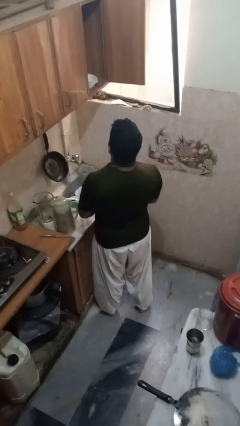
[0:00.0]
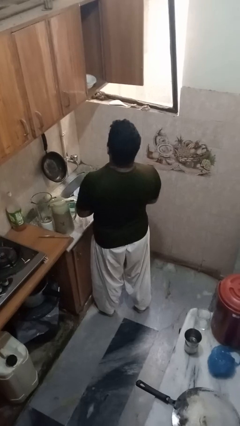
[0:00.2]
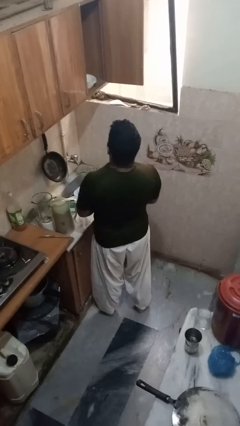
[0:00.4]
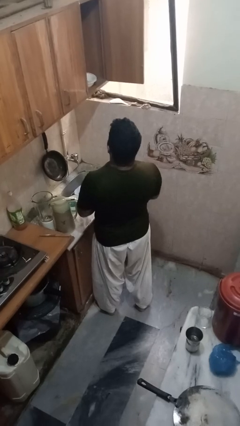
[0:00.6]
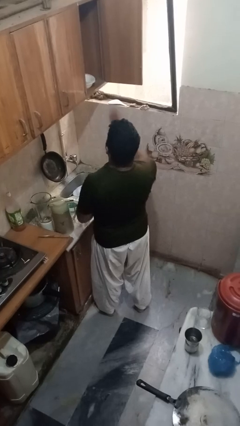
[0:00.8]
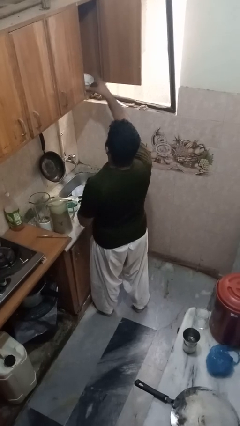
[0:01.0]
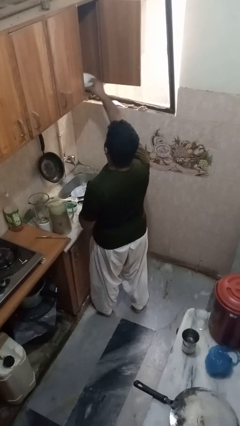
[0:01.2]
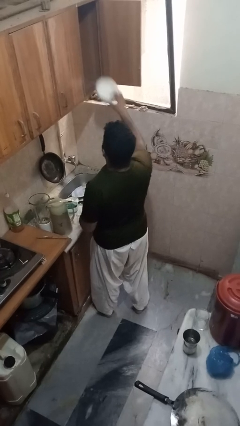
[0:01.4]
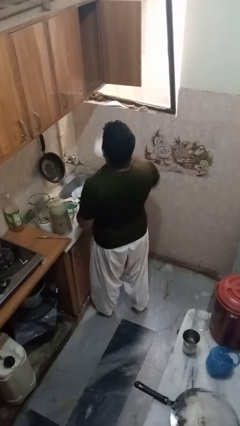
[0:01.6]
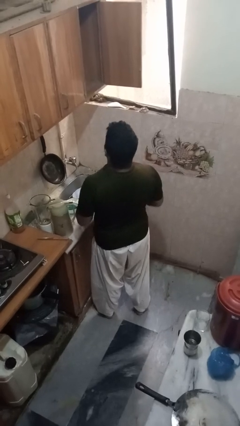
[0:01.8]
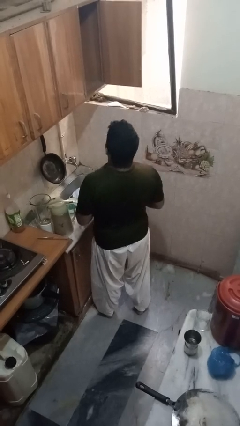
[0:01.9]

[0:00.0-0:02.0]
person takes object from cabinet

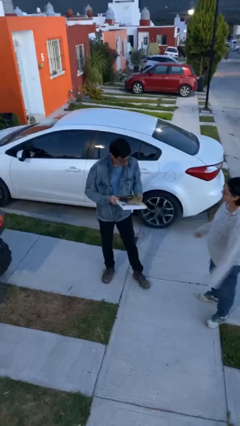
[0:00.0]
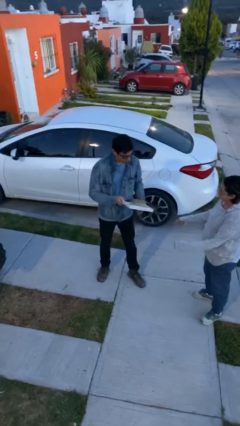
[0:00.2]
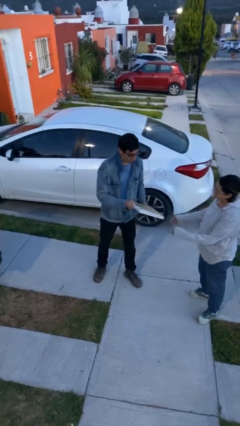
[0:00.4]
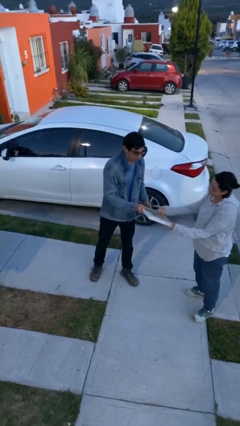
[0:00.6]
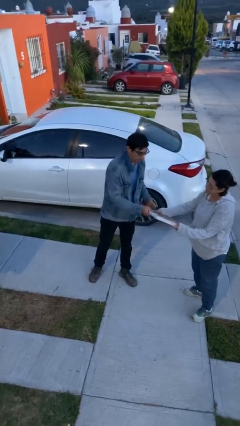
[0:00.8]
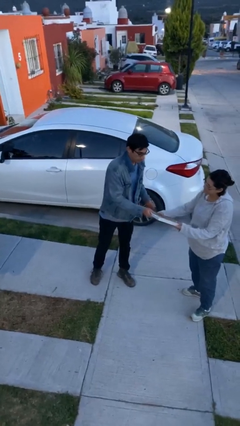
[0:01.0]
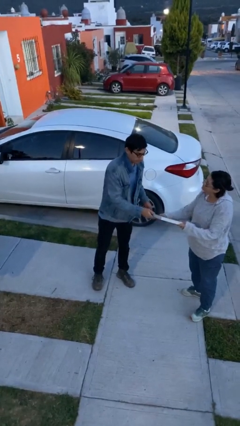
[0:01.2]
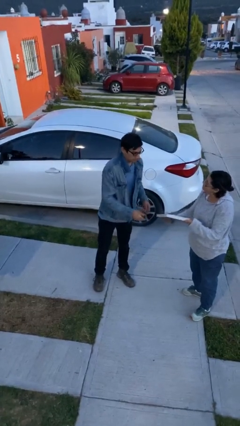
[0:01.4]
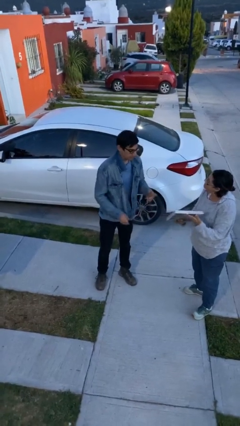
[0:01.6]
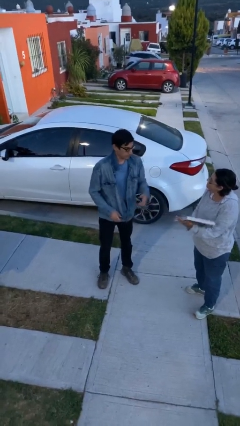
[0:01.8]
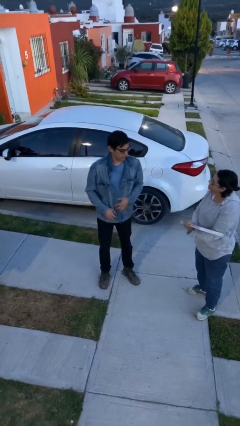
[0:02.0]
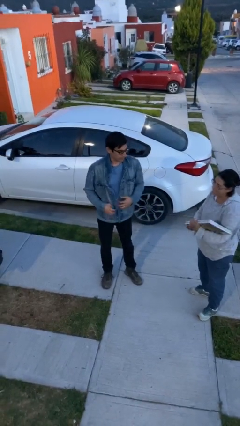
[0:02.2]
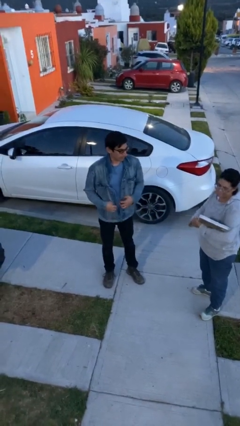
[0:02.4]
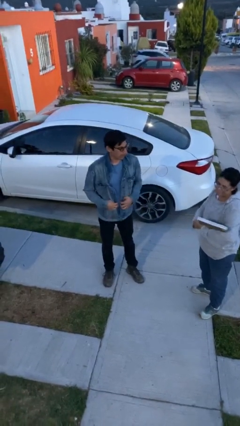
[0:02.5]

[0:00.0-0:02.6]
person transfers object to person

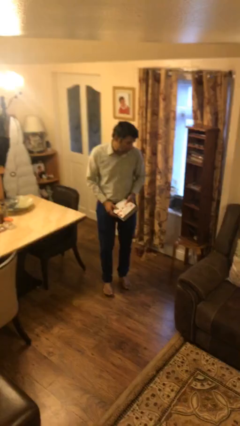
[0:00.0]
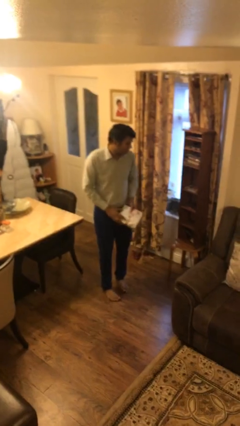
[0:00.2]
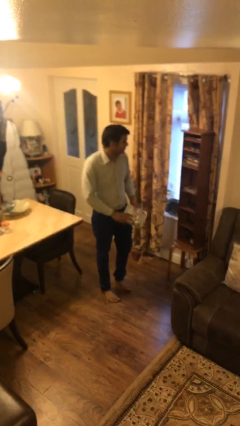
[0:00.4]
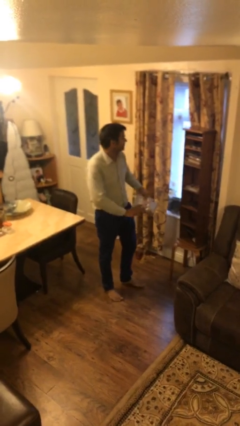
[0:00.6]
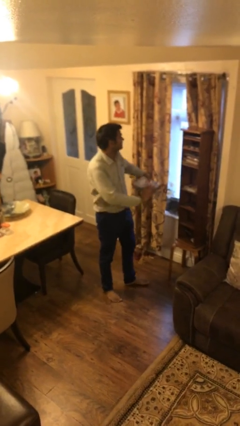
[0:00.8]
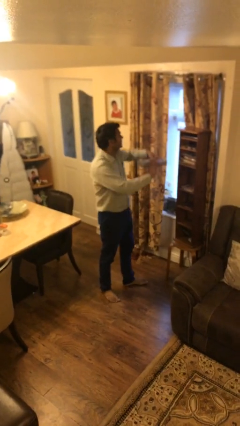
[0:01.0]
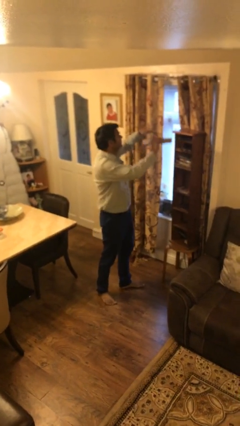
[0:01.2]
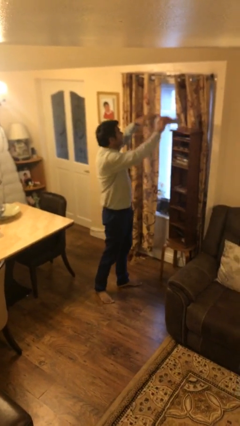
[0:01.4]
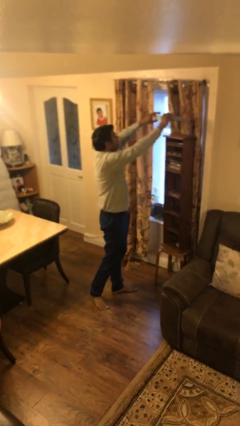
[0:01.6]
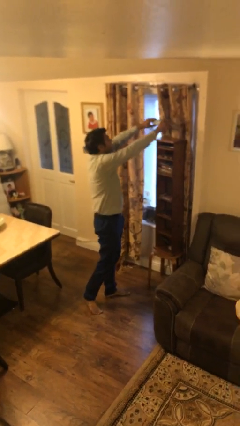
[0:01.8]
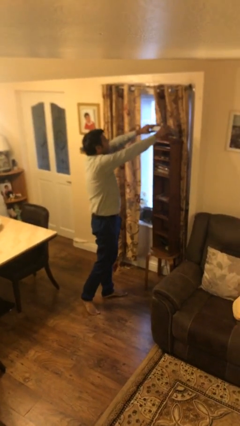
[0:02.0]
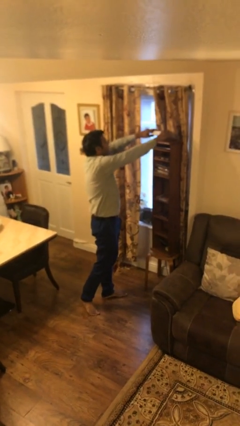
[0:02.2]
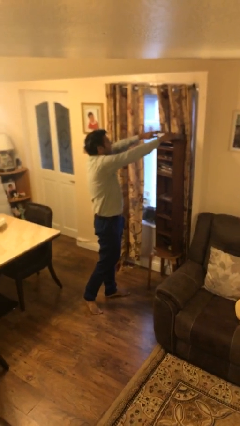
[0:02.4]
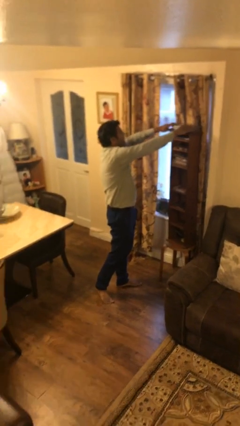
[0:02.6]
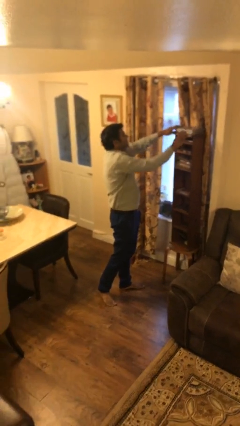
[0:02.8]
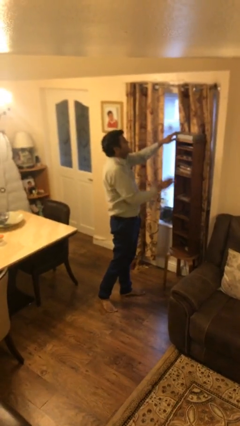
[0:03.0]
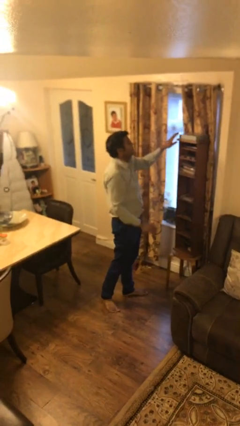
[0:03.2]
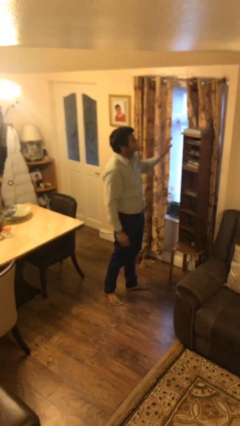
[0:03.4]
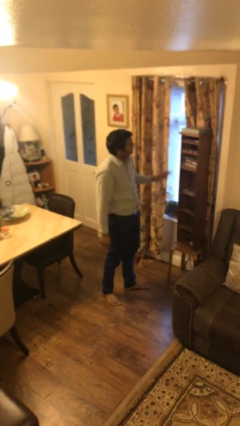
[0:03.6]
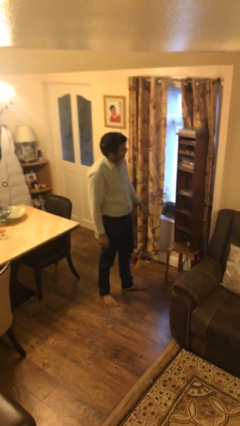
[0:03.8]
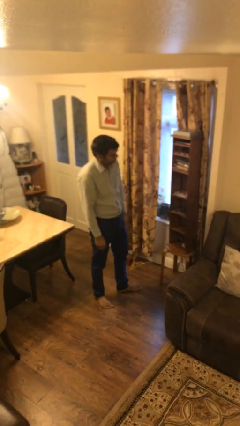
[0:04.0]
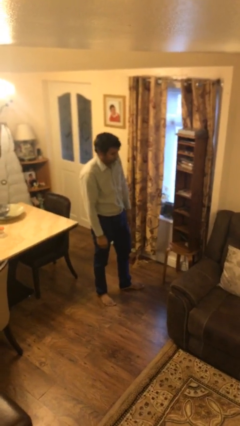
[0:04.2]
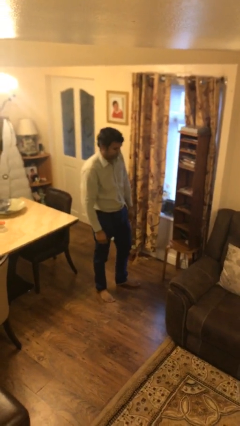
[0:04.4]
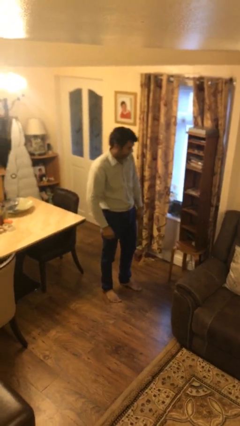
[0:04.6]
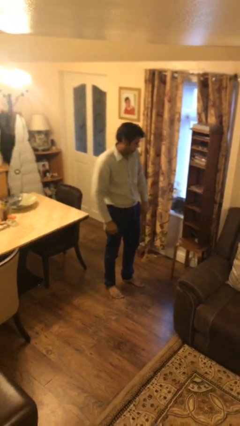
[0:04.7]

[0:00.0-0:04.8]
person puts down object on shelf

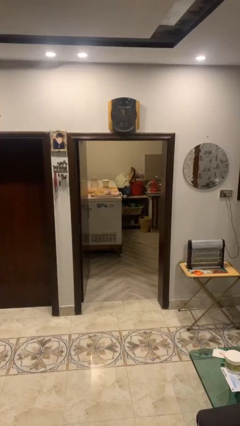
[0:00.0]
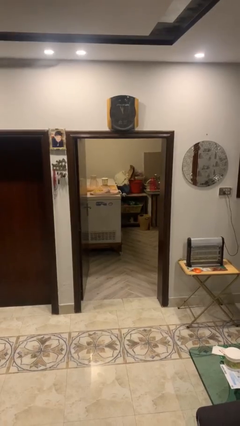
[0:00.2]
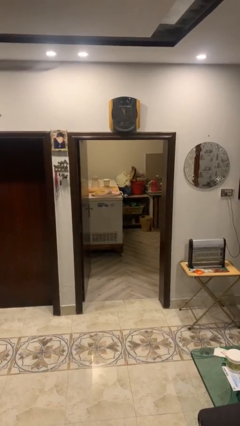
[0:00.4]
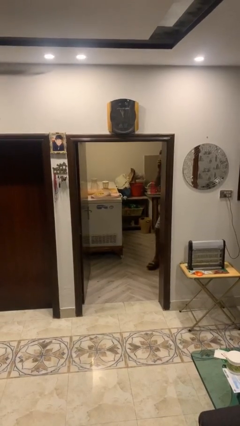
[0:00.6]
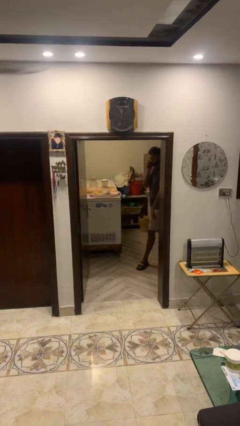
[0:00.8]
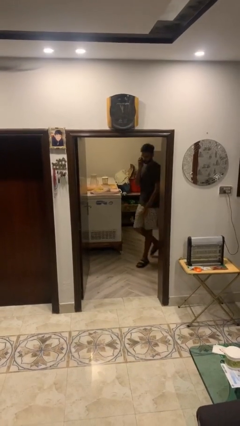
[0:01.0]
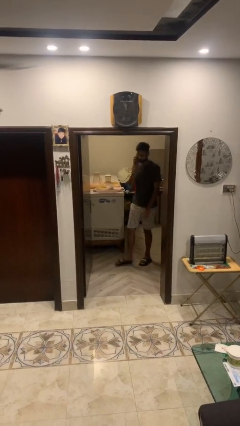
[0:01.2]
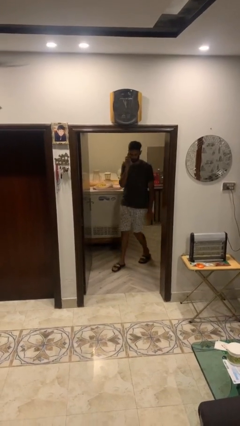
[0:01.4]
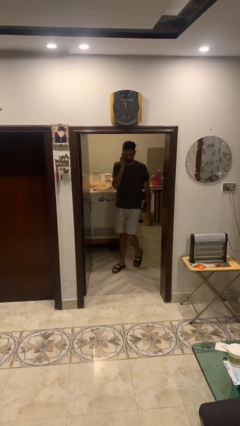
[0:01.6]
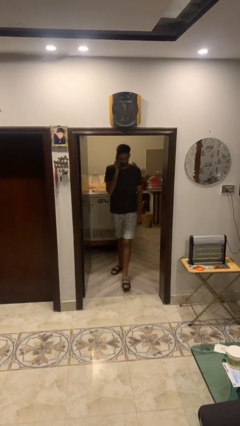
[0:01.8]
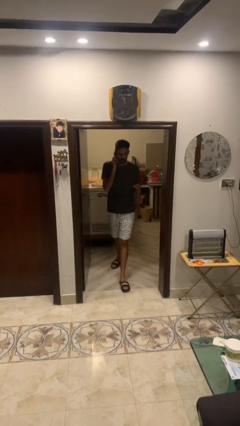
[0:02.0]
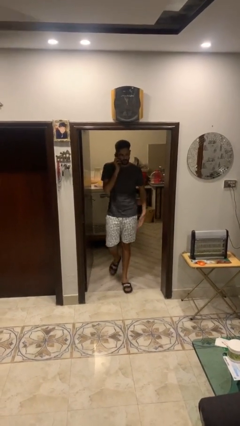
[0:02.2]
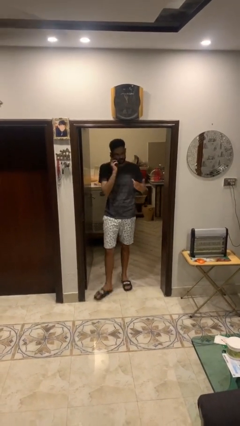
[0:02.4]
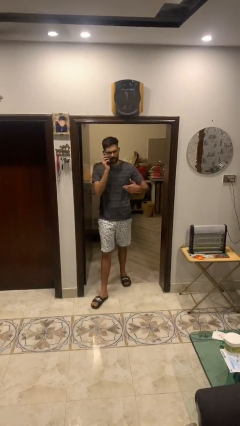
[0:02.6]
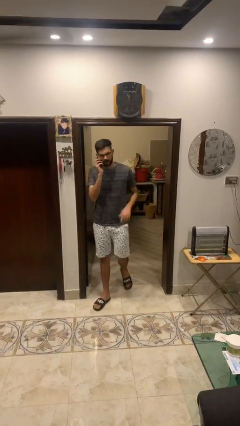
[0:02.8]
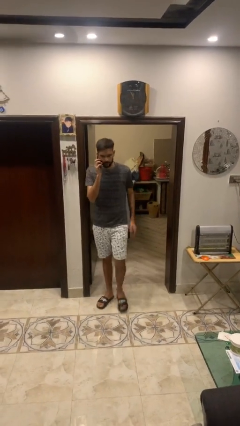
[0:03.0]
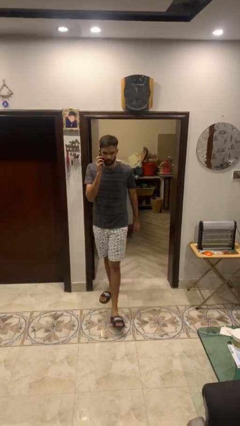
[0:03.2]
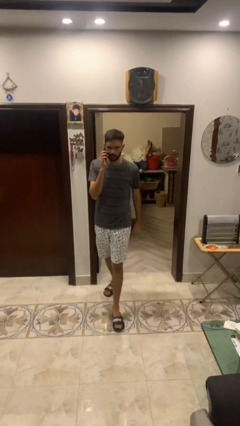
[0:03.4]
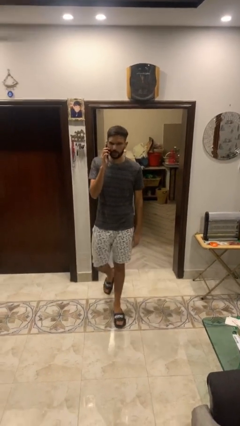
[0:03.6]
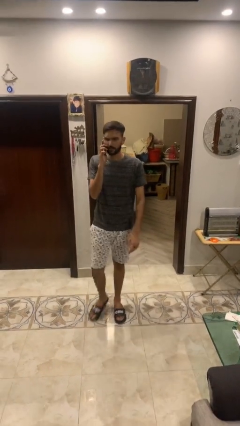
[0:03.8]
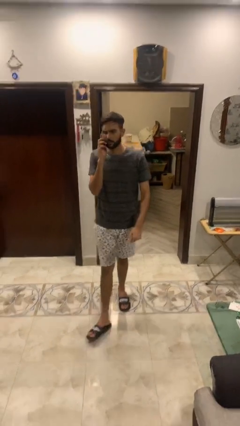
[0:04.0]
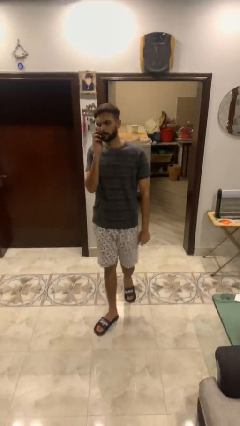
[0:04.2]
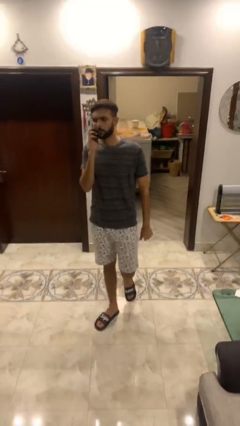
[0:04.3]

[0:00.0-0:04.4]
person enters scene through structure

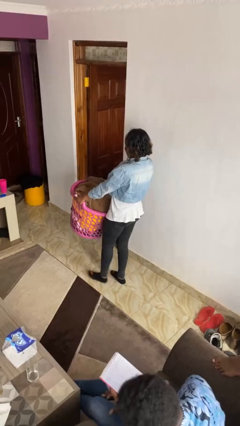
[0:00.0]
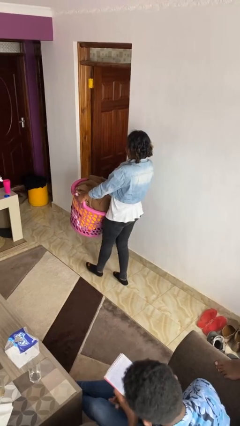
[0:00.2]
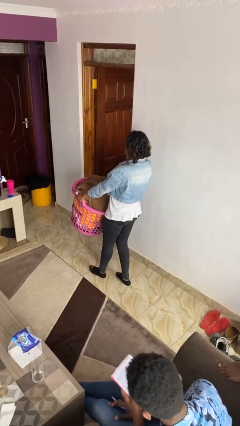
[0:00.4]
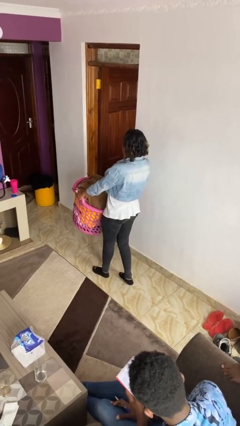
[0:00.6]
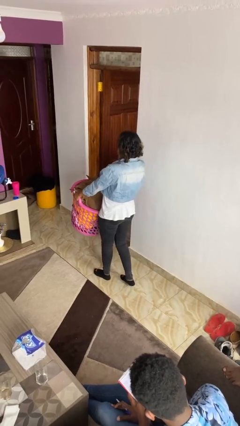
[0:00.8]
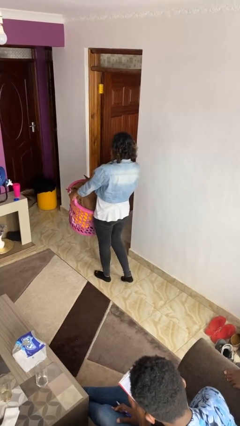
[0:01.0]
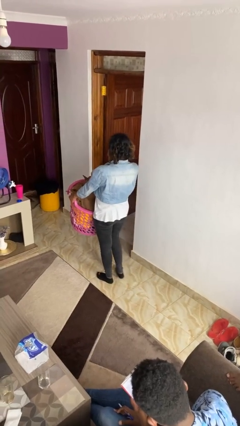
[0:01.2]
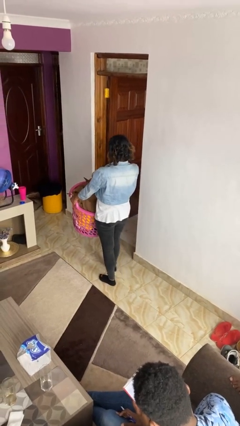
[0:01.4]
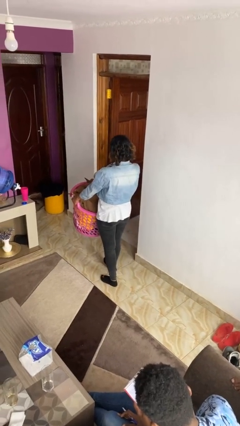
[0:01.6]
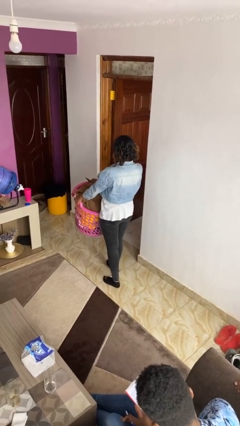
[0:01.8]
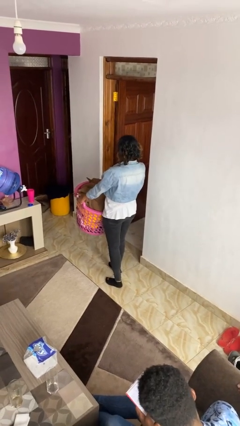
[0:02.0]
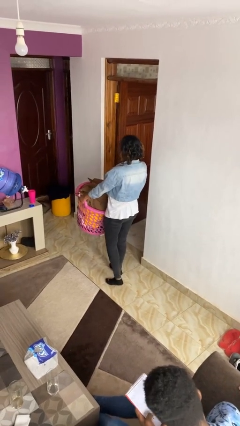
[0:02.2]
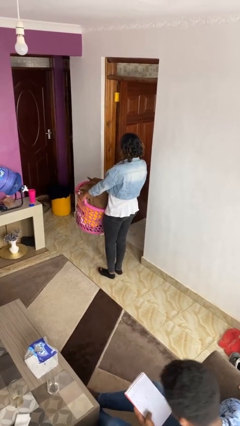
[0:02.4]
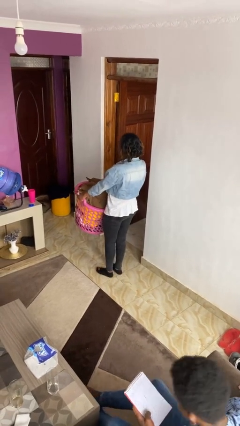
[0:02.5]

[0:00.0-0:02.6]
person carries laundry basket

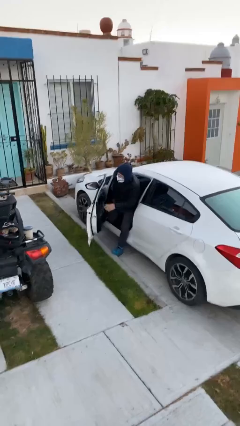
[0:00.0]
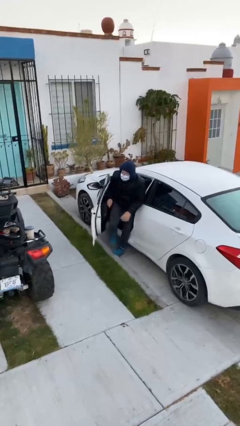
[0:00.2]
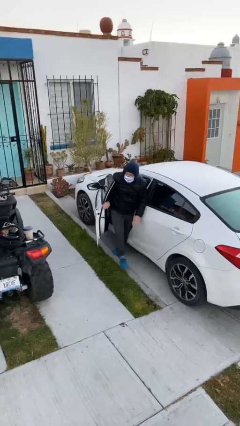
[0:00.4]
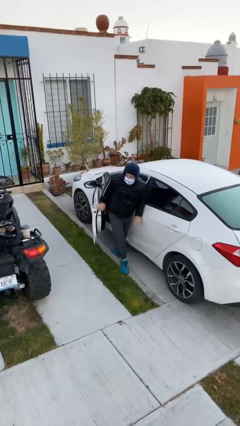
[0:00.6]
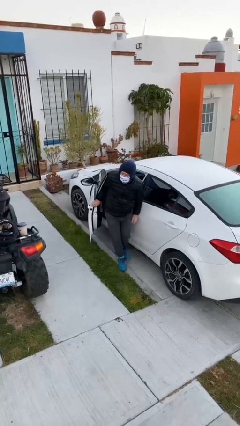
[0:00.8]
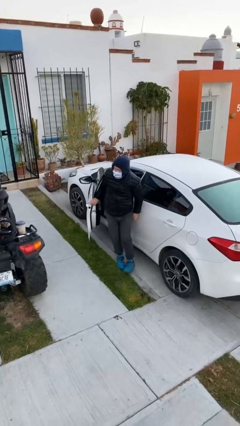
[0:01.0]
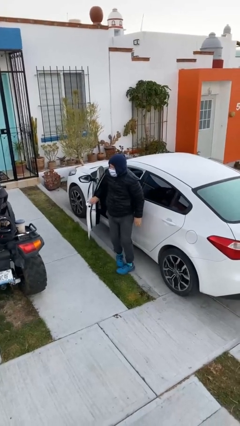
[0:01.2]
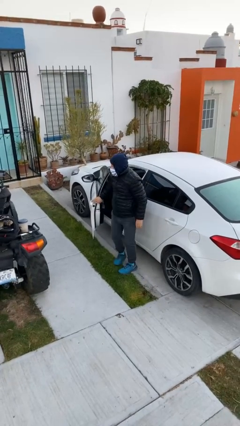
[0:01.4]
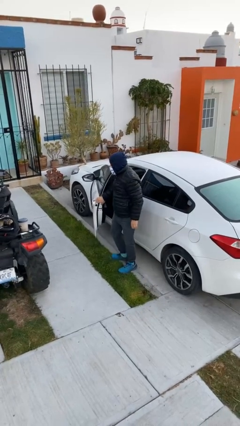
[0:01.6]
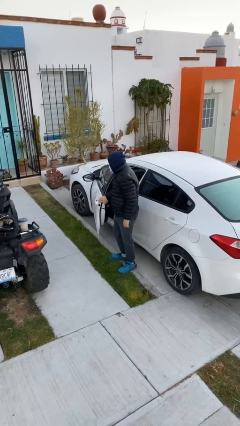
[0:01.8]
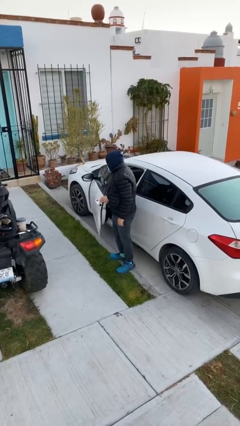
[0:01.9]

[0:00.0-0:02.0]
person exits car
